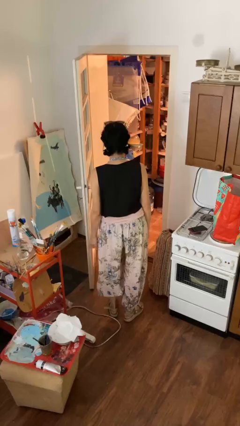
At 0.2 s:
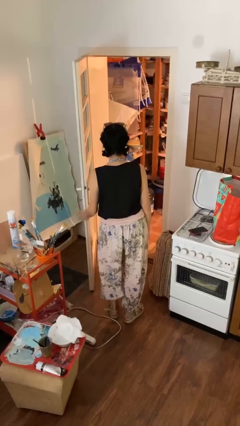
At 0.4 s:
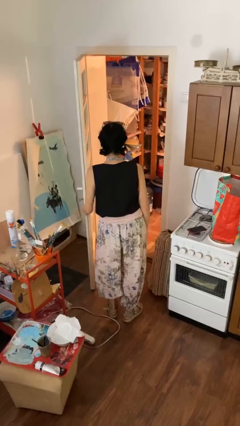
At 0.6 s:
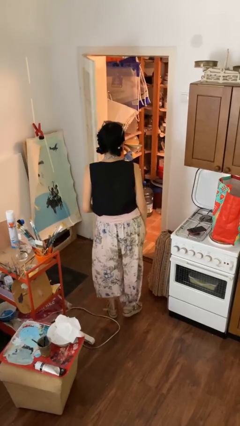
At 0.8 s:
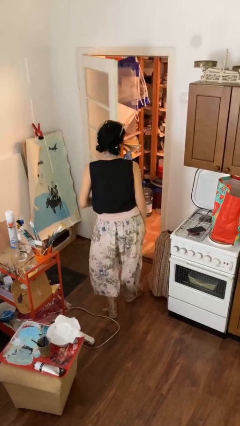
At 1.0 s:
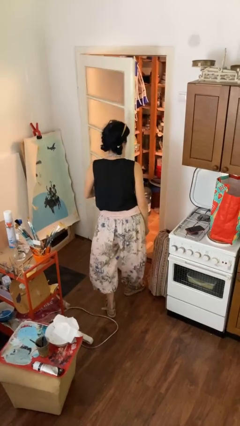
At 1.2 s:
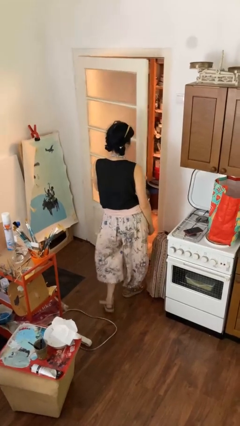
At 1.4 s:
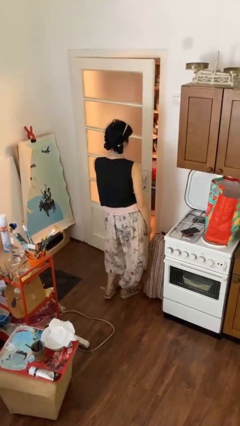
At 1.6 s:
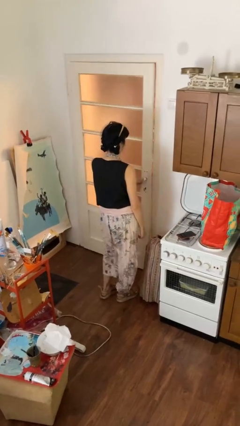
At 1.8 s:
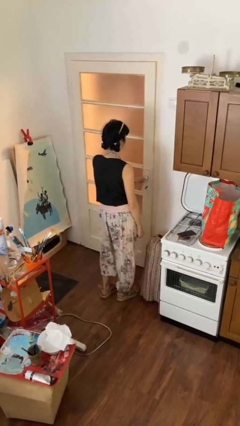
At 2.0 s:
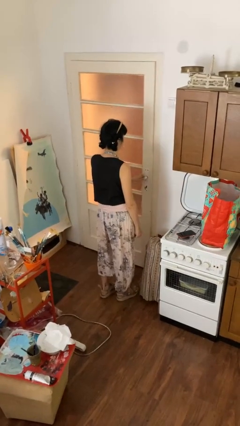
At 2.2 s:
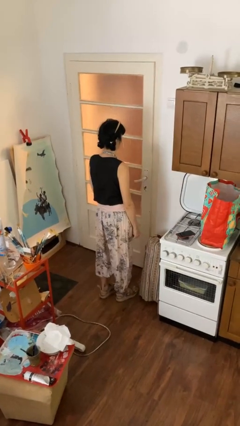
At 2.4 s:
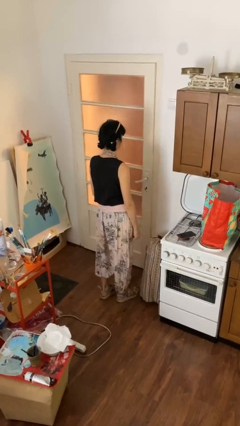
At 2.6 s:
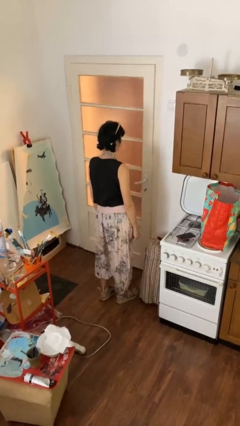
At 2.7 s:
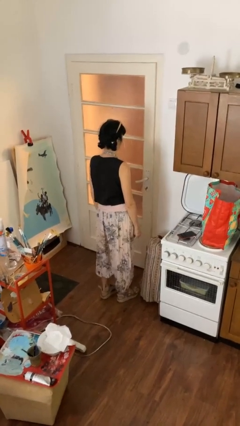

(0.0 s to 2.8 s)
person closes facility door

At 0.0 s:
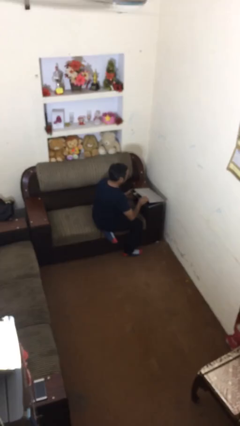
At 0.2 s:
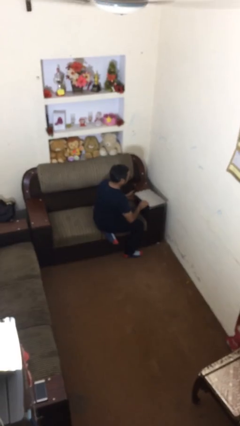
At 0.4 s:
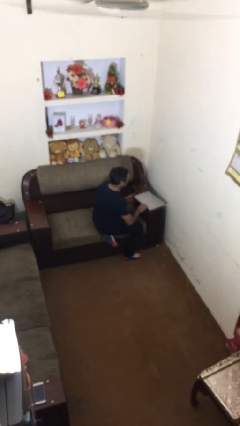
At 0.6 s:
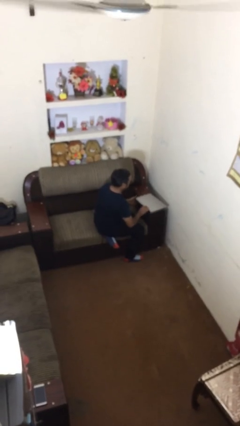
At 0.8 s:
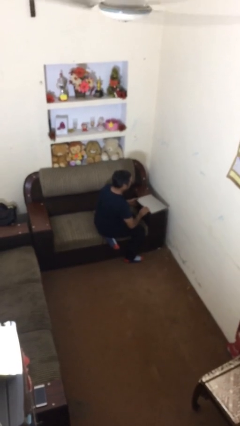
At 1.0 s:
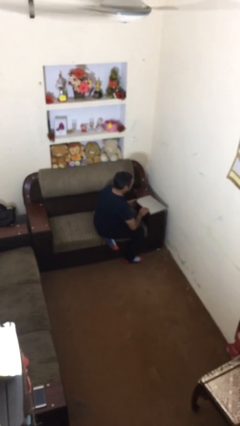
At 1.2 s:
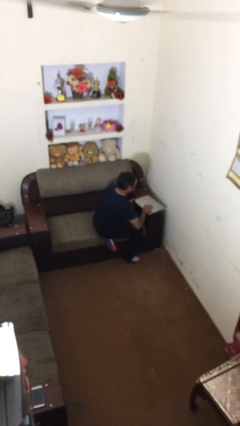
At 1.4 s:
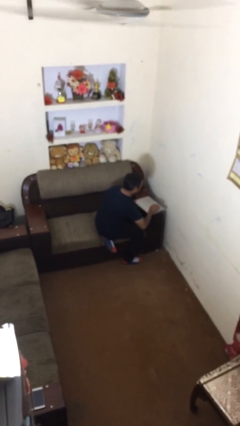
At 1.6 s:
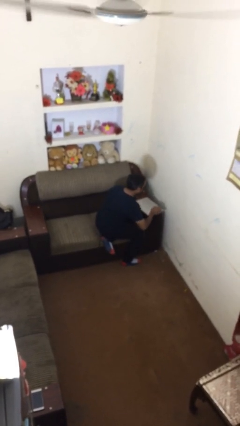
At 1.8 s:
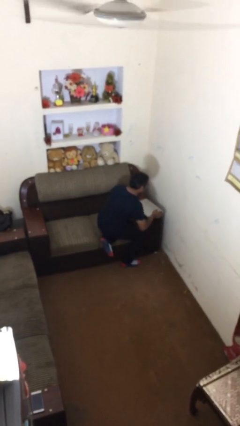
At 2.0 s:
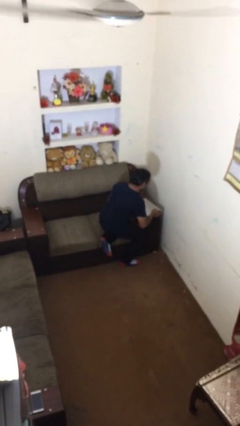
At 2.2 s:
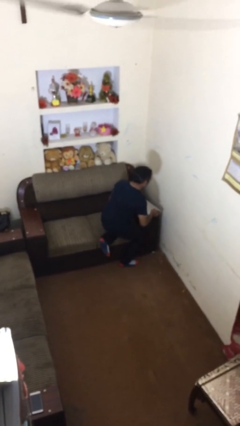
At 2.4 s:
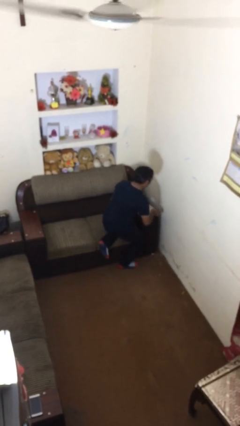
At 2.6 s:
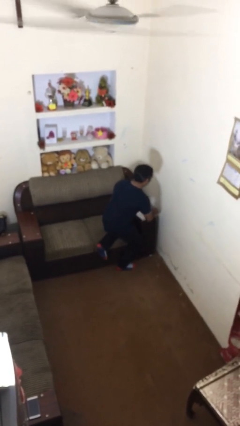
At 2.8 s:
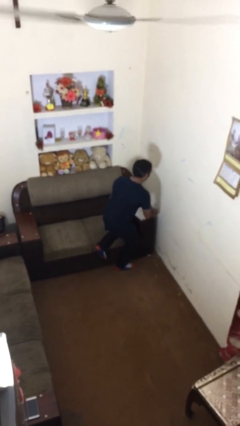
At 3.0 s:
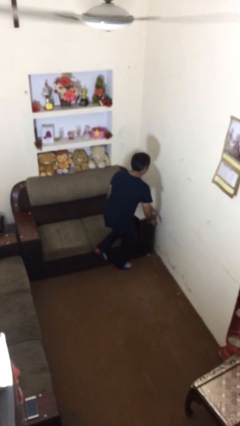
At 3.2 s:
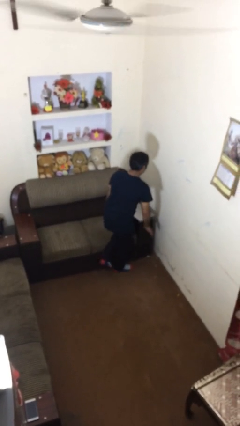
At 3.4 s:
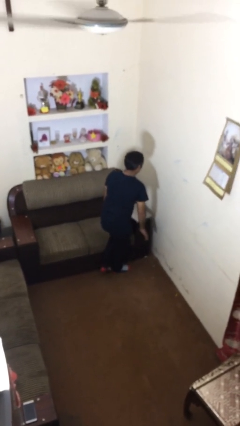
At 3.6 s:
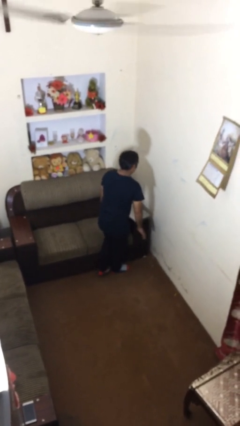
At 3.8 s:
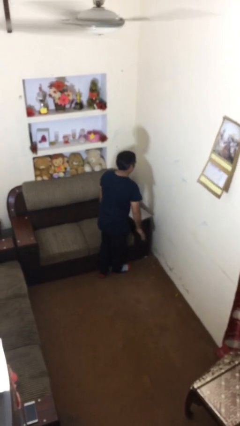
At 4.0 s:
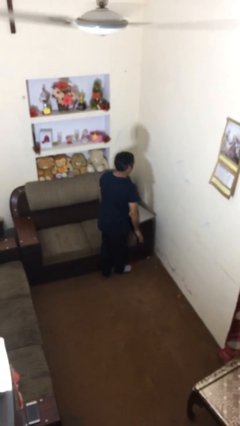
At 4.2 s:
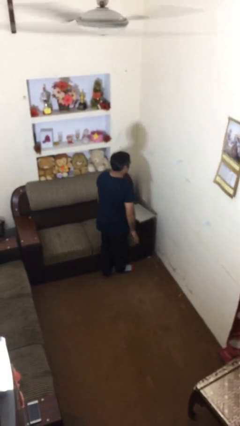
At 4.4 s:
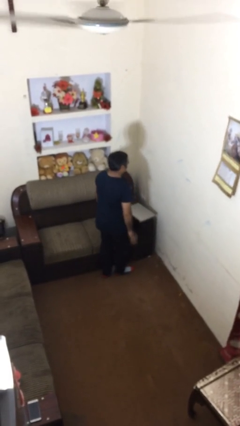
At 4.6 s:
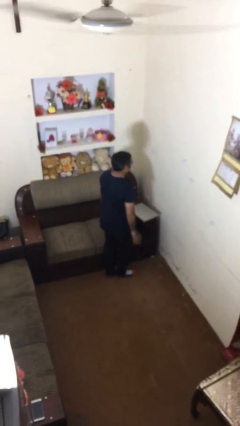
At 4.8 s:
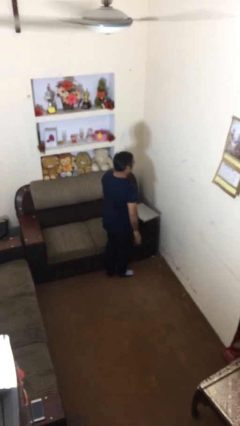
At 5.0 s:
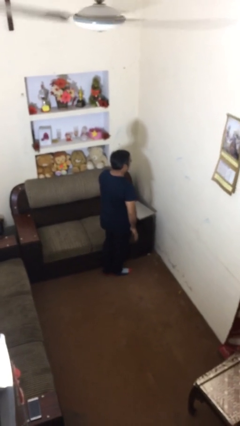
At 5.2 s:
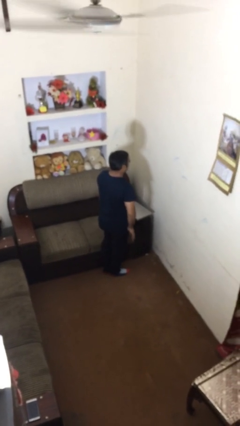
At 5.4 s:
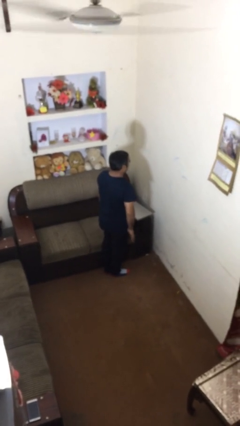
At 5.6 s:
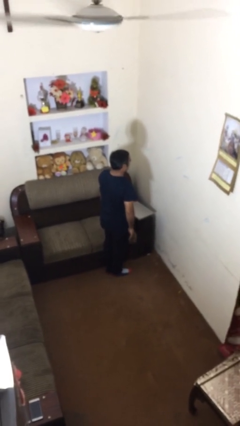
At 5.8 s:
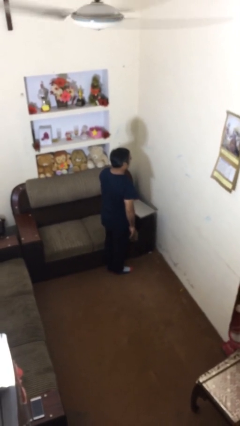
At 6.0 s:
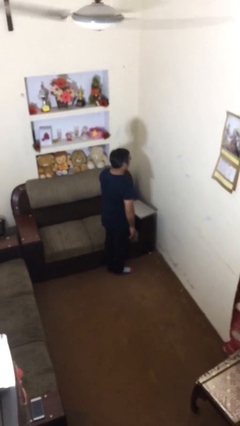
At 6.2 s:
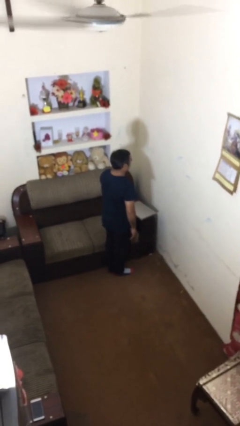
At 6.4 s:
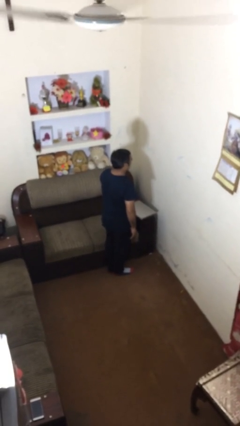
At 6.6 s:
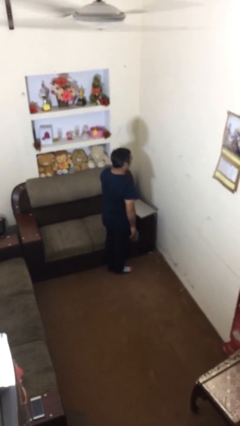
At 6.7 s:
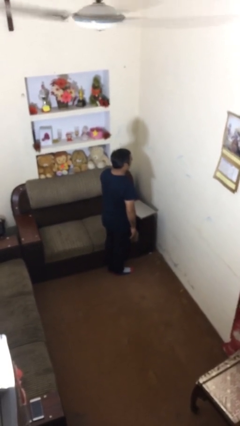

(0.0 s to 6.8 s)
person stands up

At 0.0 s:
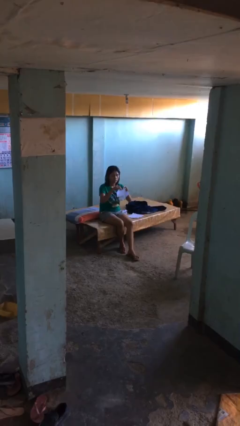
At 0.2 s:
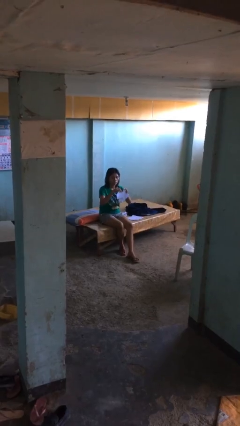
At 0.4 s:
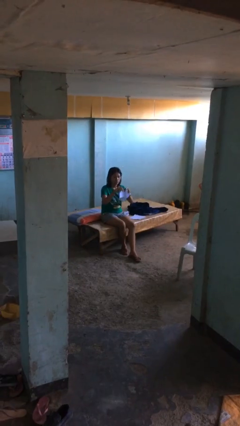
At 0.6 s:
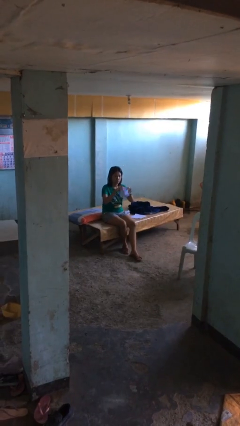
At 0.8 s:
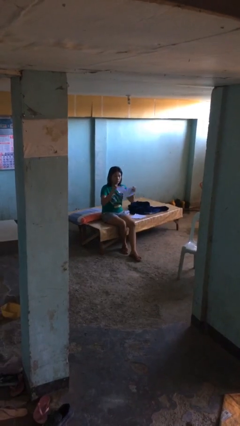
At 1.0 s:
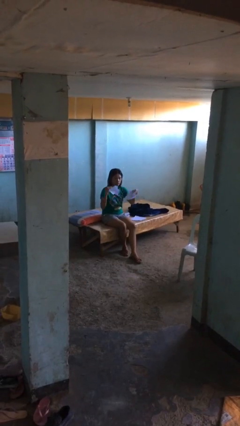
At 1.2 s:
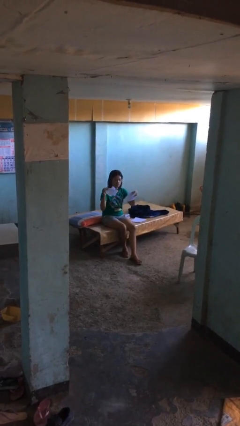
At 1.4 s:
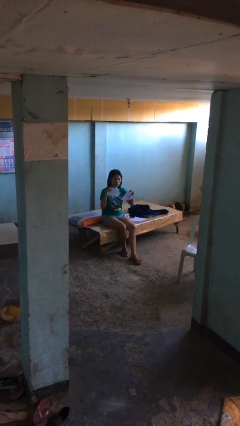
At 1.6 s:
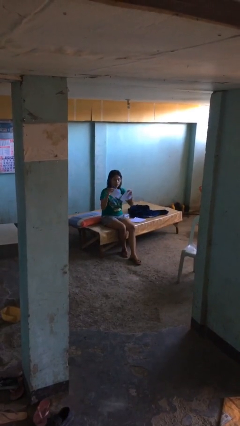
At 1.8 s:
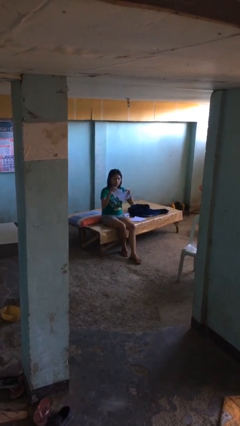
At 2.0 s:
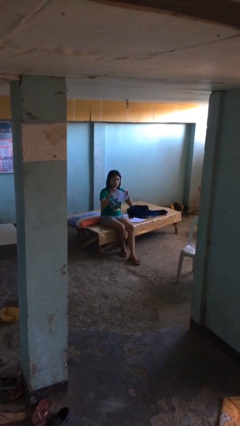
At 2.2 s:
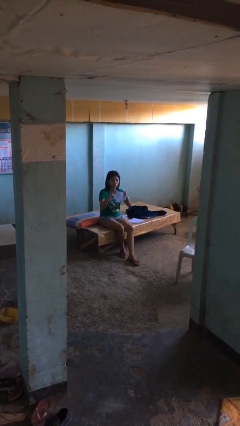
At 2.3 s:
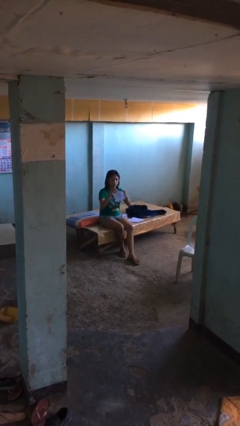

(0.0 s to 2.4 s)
person tears paper

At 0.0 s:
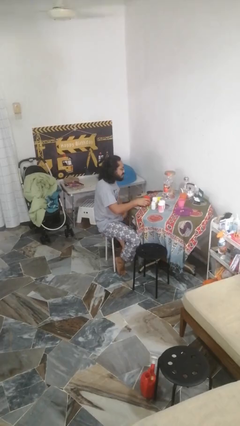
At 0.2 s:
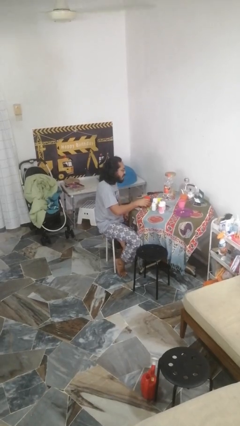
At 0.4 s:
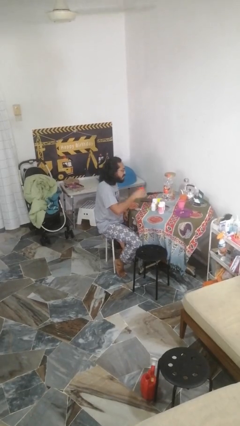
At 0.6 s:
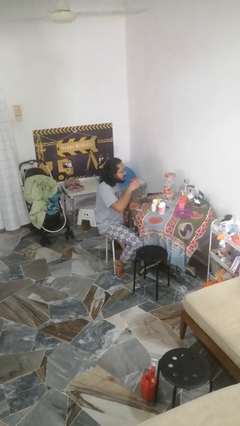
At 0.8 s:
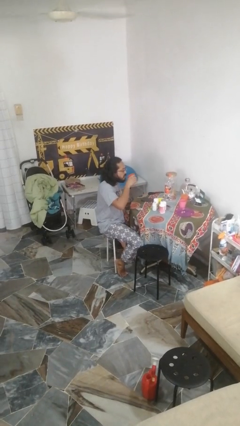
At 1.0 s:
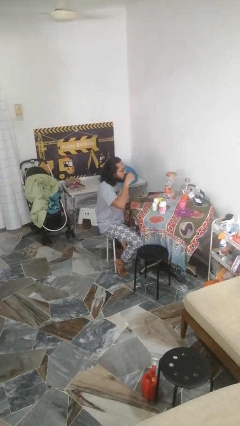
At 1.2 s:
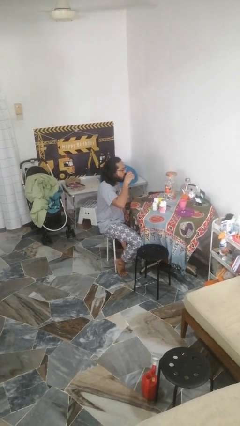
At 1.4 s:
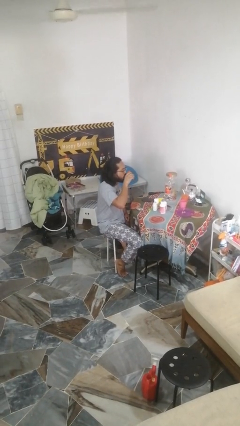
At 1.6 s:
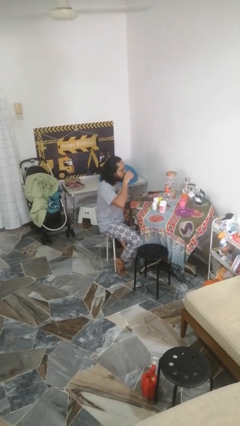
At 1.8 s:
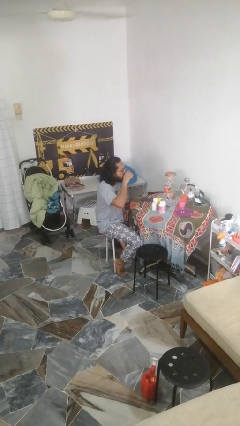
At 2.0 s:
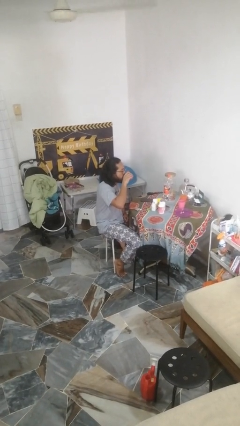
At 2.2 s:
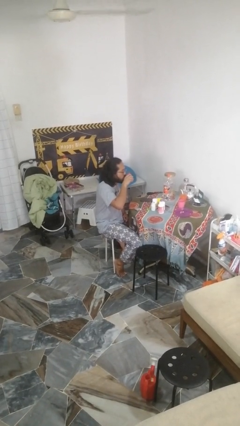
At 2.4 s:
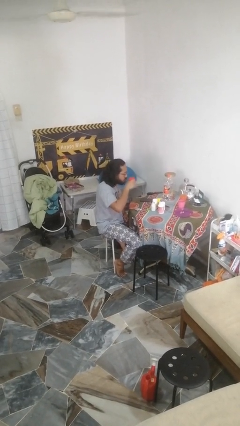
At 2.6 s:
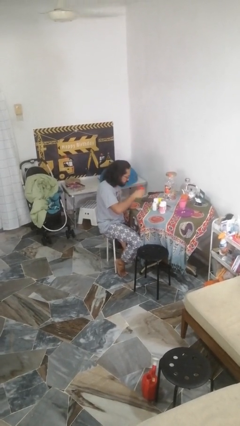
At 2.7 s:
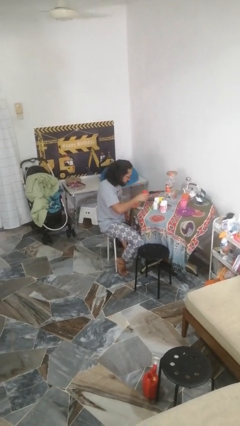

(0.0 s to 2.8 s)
person drinks from cup

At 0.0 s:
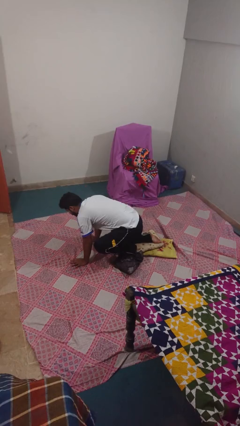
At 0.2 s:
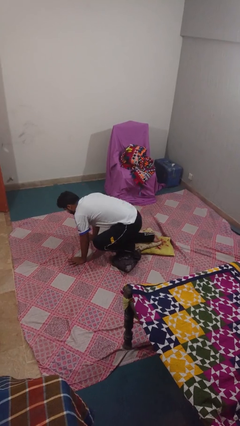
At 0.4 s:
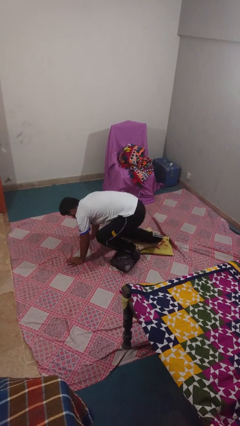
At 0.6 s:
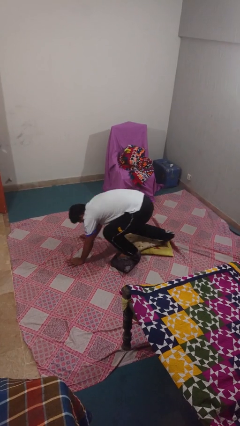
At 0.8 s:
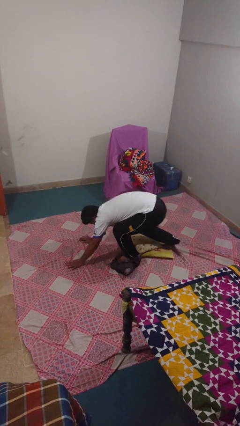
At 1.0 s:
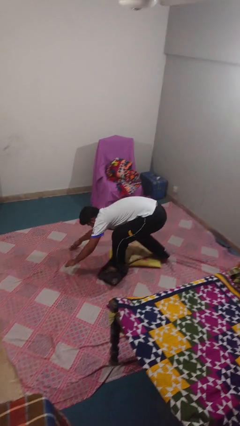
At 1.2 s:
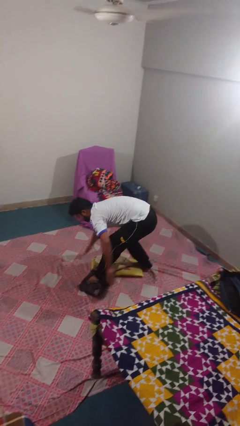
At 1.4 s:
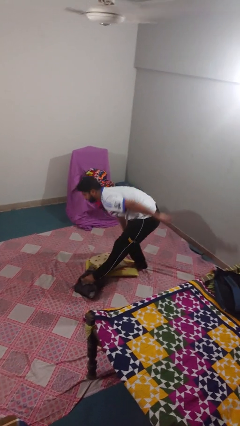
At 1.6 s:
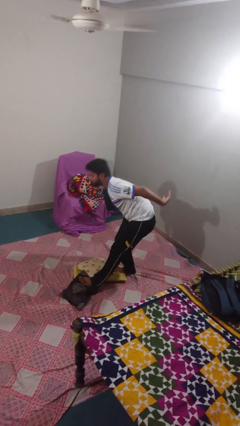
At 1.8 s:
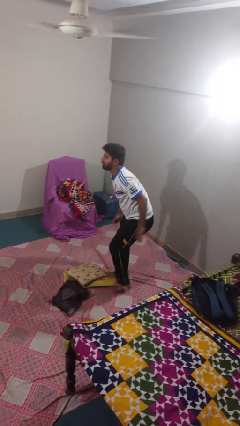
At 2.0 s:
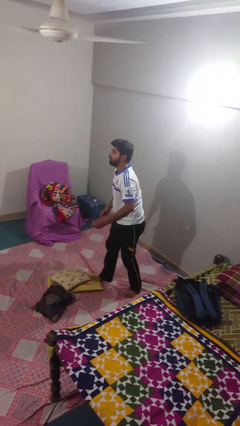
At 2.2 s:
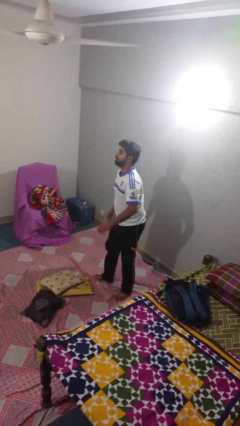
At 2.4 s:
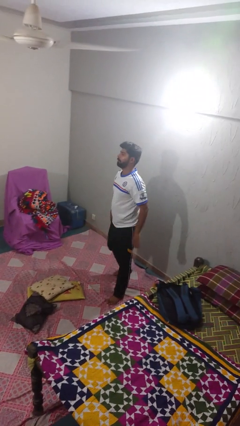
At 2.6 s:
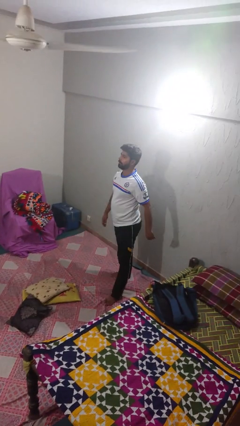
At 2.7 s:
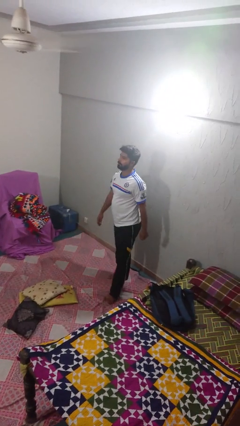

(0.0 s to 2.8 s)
person stands up from floor
